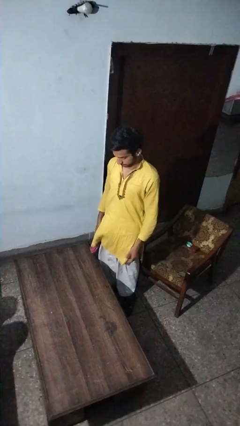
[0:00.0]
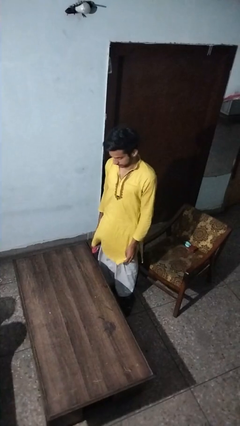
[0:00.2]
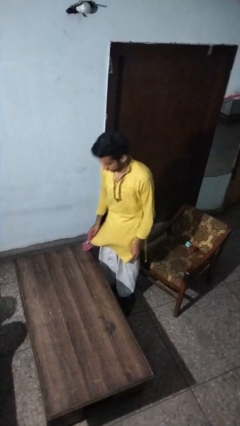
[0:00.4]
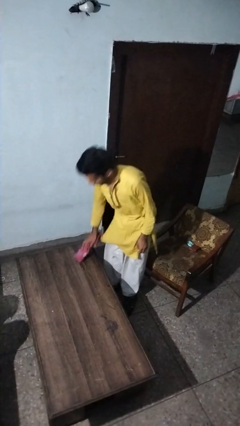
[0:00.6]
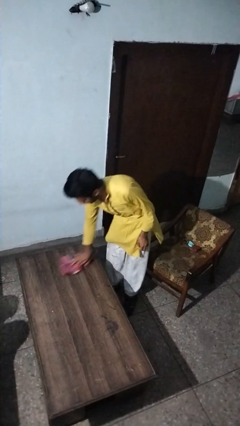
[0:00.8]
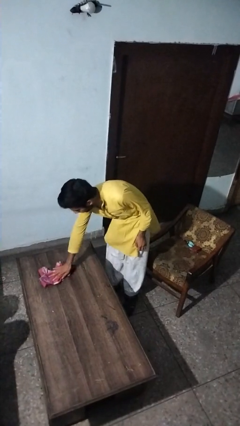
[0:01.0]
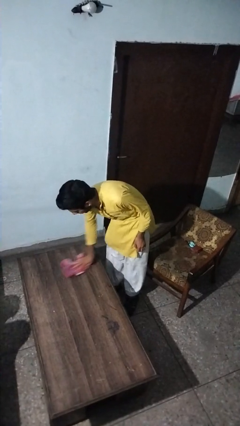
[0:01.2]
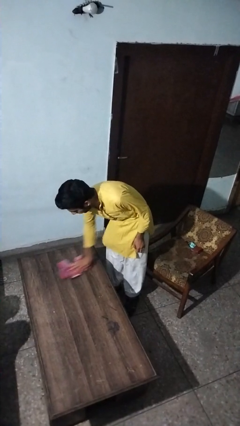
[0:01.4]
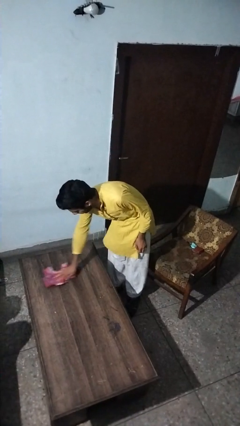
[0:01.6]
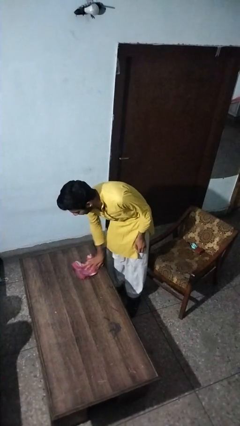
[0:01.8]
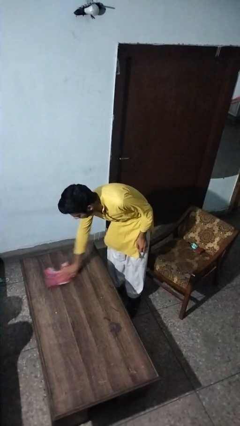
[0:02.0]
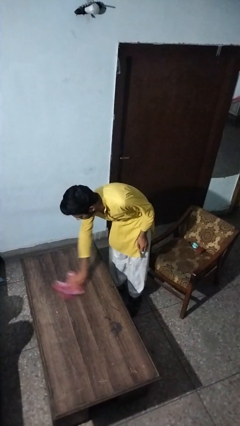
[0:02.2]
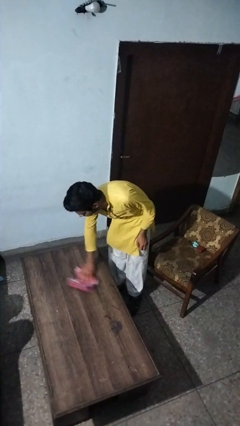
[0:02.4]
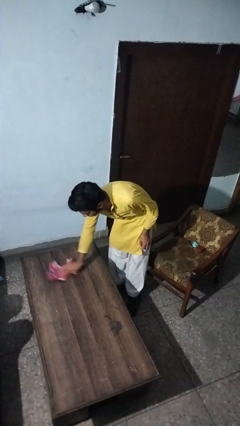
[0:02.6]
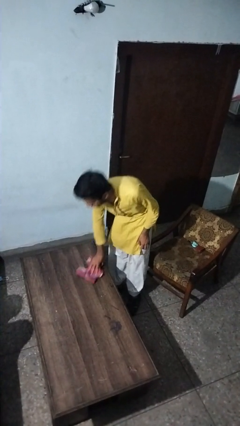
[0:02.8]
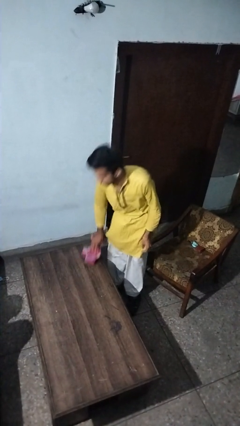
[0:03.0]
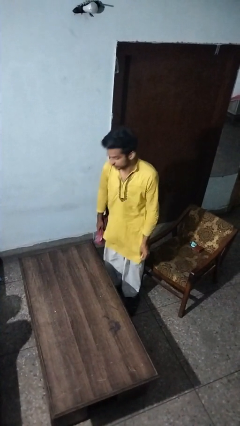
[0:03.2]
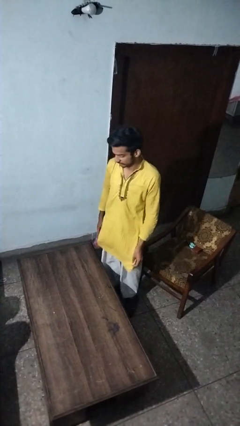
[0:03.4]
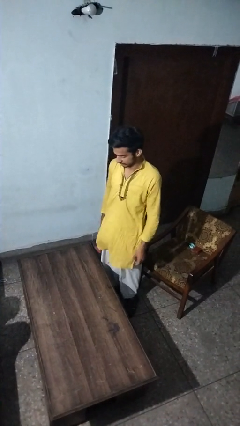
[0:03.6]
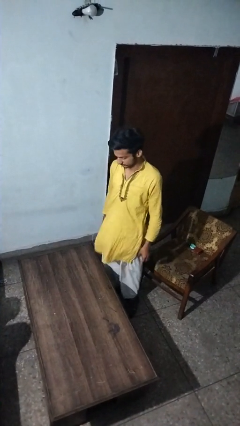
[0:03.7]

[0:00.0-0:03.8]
person cleans table with rag

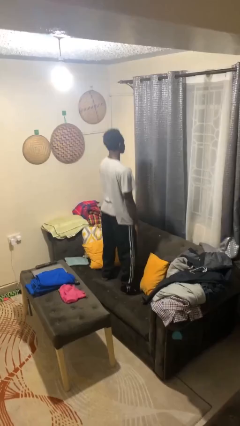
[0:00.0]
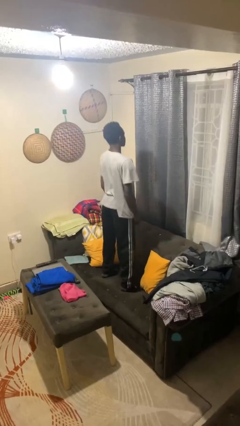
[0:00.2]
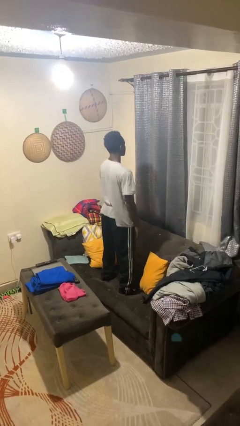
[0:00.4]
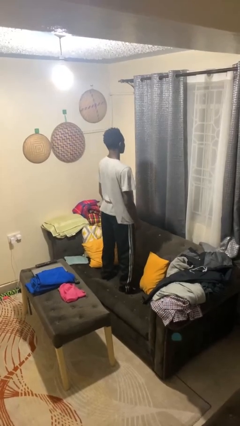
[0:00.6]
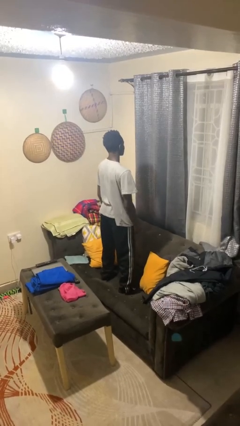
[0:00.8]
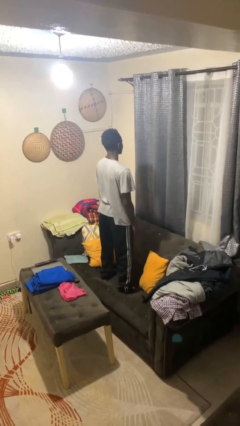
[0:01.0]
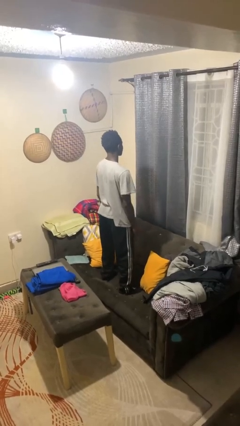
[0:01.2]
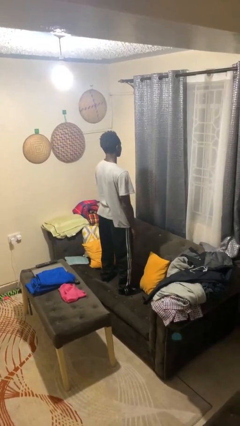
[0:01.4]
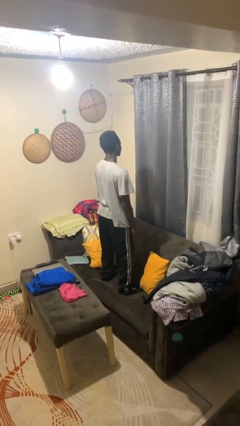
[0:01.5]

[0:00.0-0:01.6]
person jumps on couch

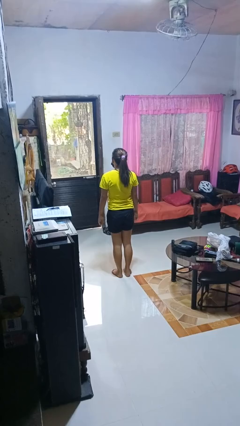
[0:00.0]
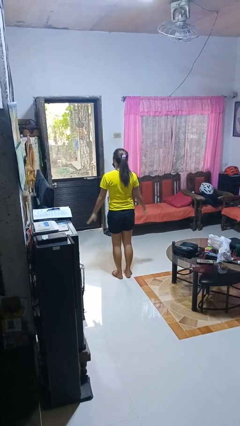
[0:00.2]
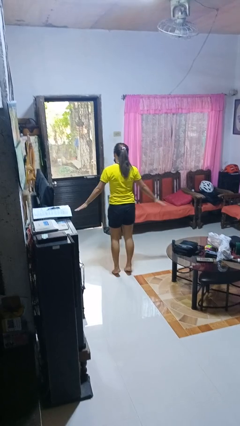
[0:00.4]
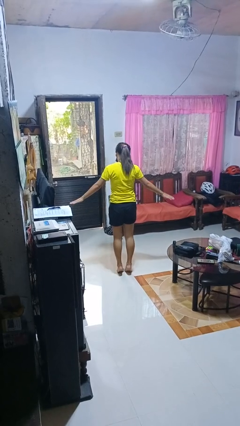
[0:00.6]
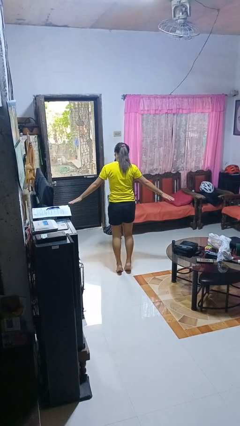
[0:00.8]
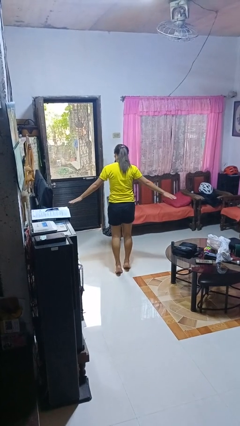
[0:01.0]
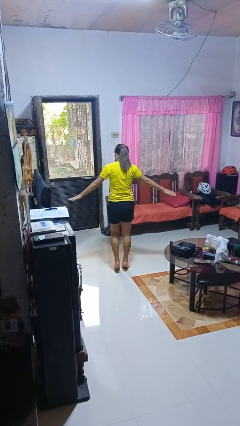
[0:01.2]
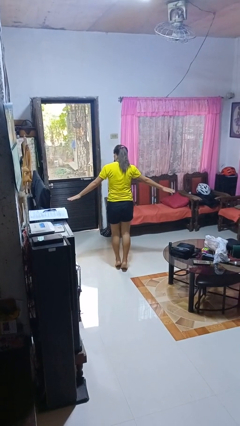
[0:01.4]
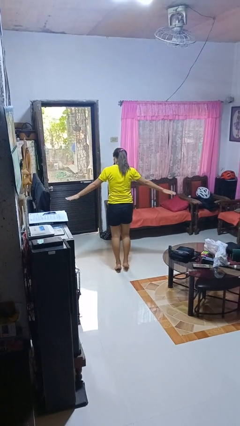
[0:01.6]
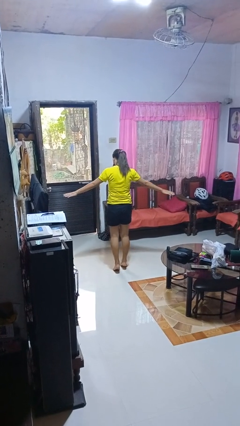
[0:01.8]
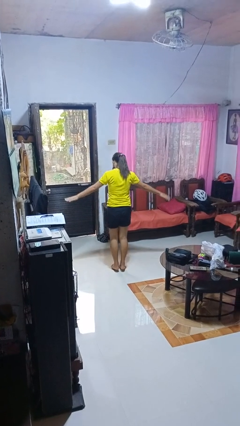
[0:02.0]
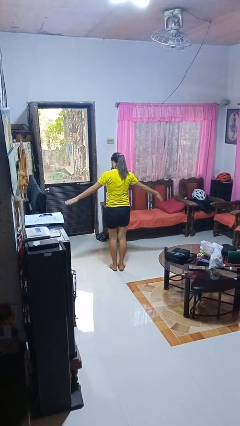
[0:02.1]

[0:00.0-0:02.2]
person walks tiptoe

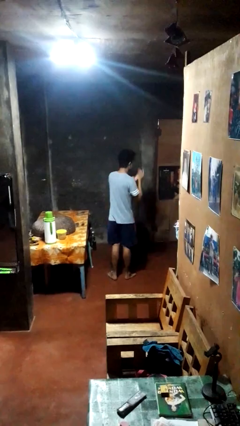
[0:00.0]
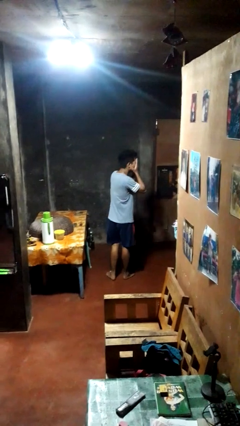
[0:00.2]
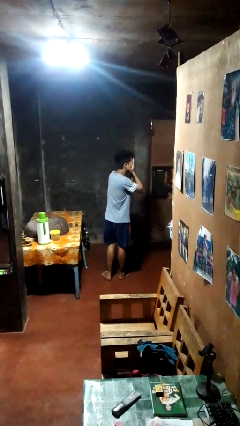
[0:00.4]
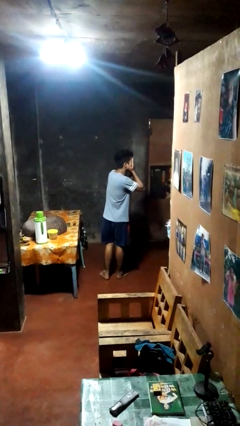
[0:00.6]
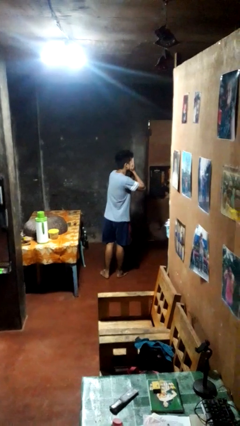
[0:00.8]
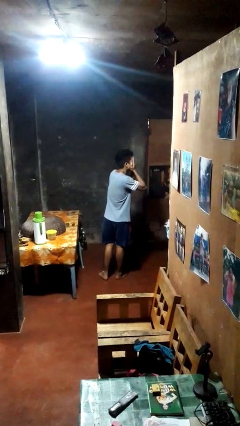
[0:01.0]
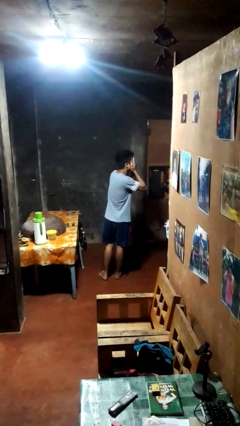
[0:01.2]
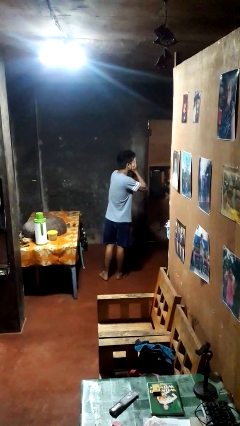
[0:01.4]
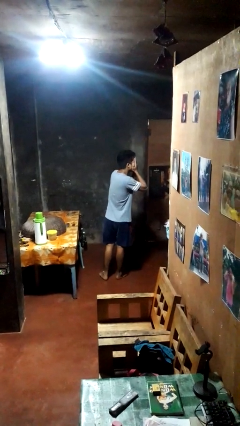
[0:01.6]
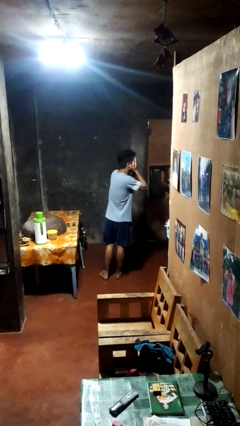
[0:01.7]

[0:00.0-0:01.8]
person covers face with hands

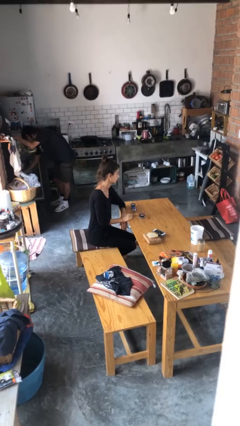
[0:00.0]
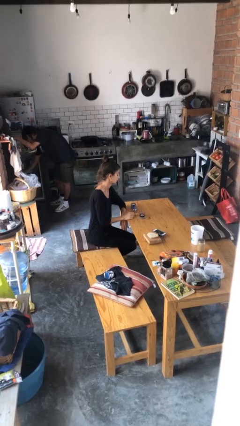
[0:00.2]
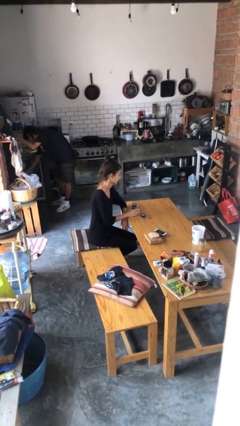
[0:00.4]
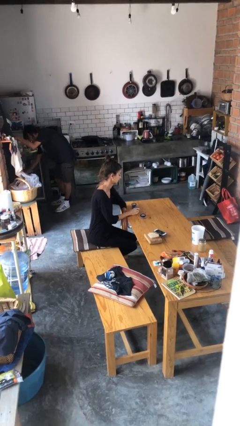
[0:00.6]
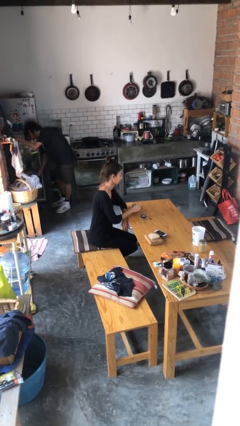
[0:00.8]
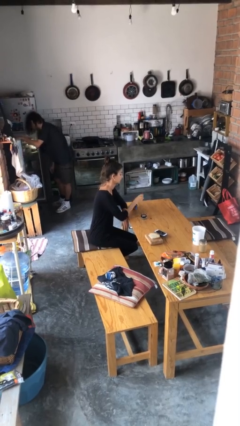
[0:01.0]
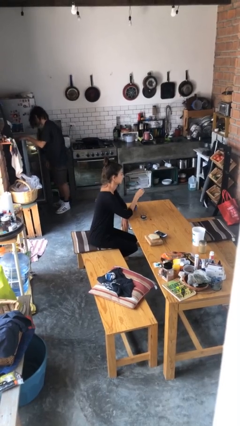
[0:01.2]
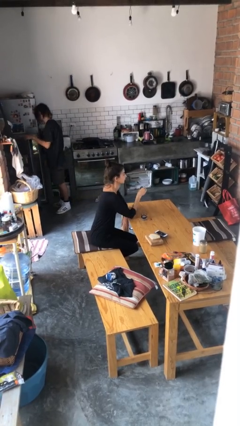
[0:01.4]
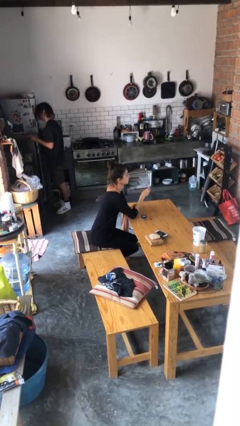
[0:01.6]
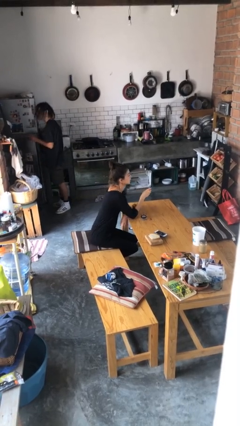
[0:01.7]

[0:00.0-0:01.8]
person picks up object from table

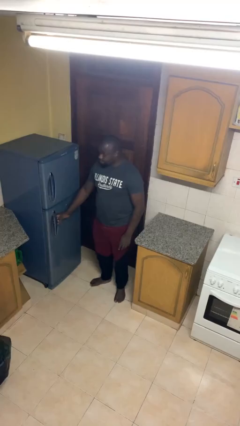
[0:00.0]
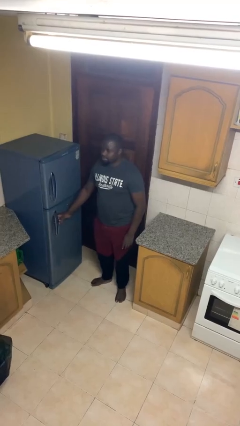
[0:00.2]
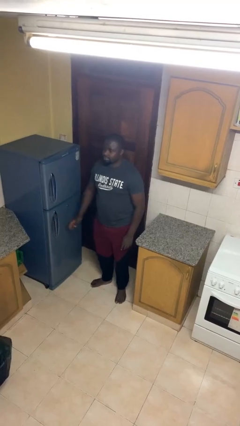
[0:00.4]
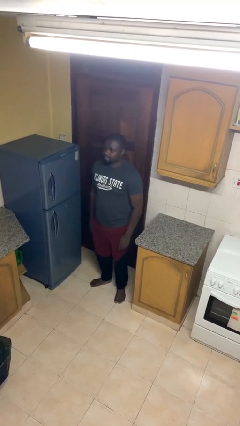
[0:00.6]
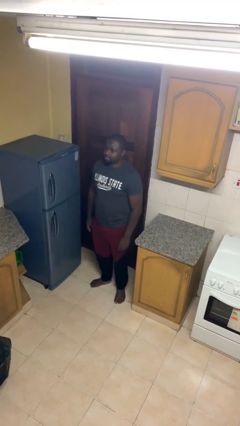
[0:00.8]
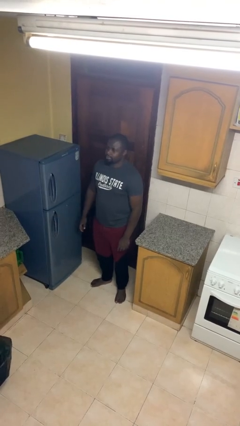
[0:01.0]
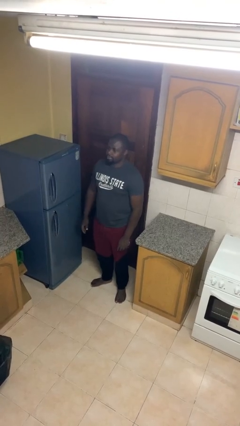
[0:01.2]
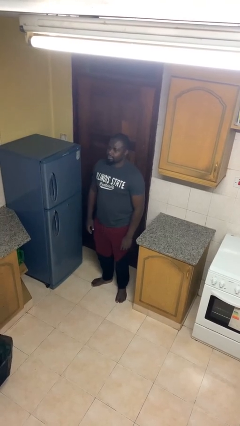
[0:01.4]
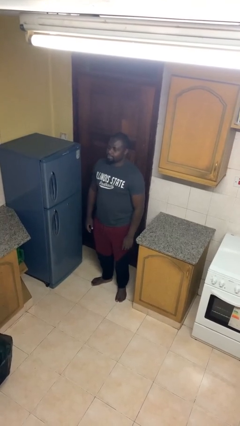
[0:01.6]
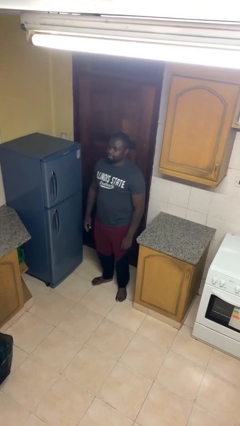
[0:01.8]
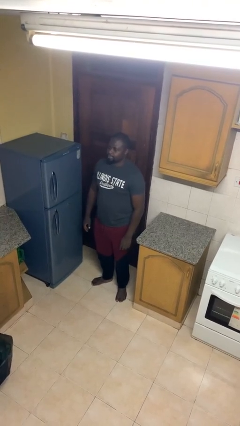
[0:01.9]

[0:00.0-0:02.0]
person closes refrigerator

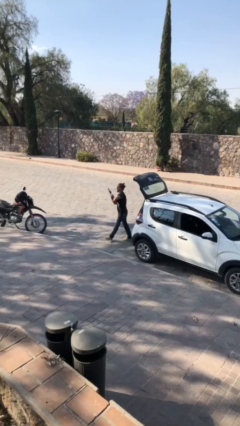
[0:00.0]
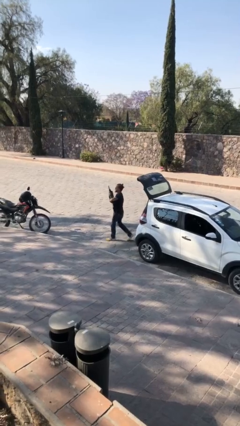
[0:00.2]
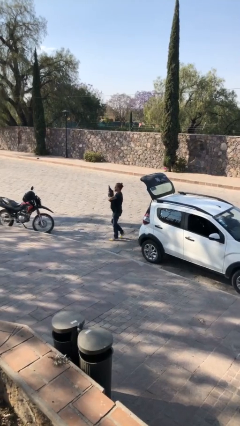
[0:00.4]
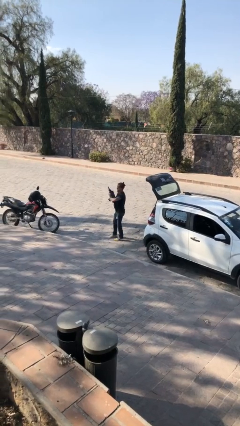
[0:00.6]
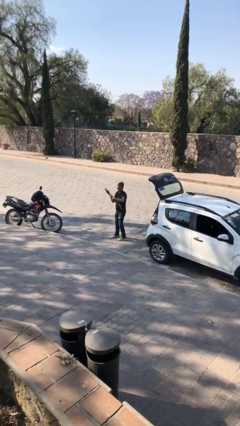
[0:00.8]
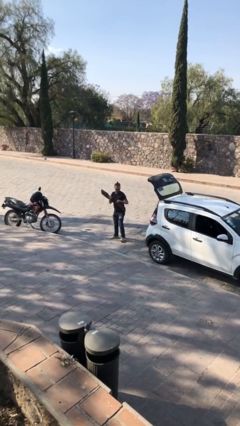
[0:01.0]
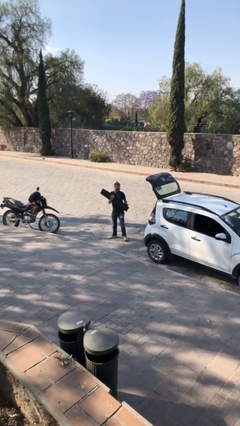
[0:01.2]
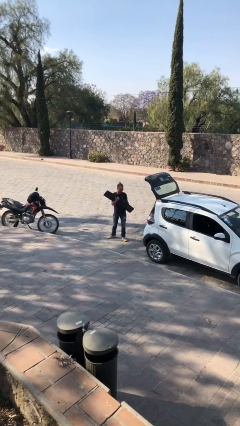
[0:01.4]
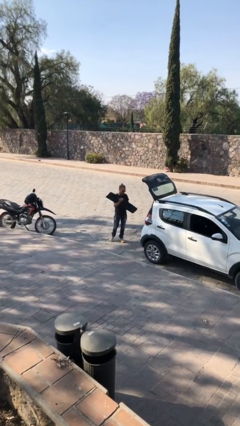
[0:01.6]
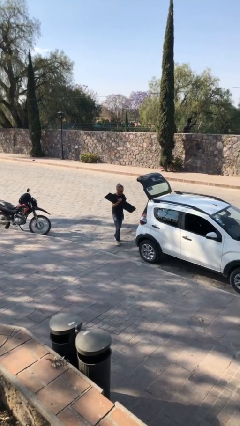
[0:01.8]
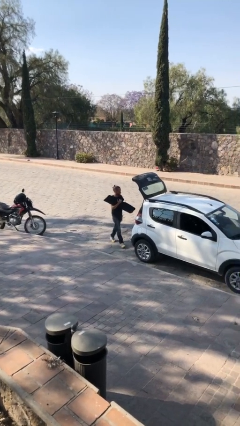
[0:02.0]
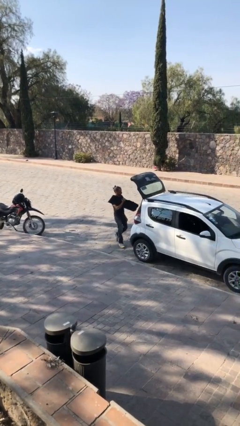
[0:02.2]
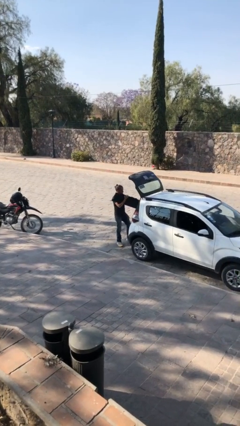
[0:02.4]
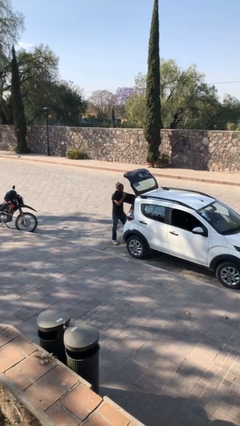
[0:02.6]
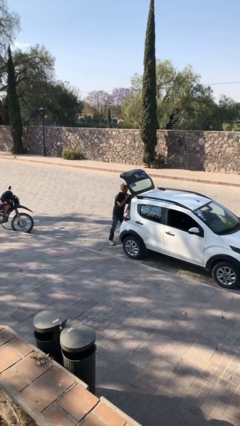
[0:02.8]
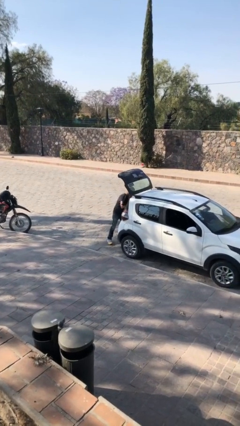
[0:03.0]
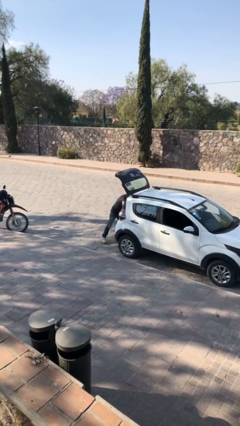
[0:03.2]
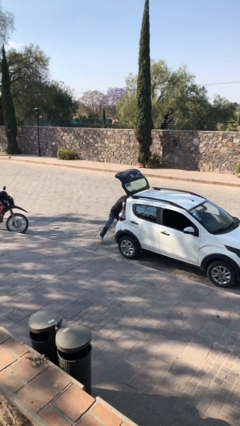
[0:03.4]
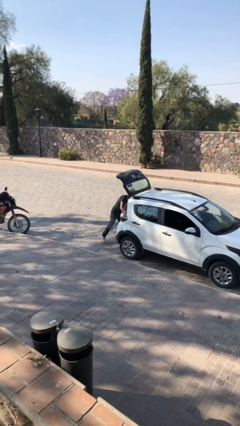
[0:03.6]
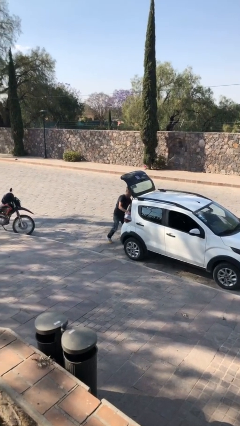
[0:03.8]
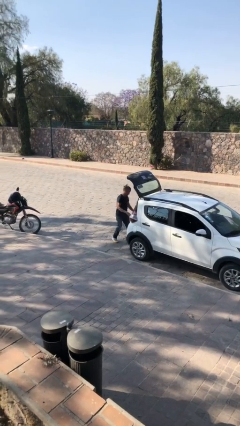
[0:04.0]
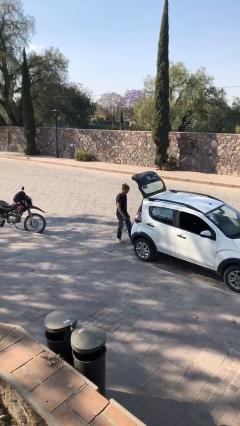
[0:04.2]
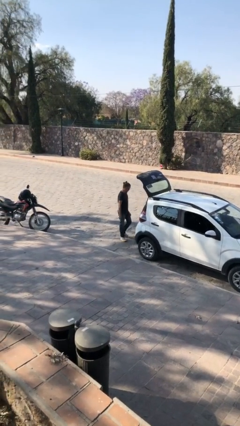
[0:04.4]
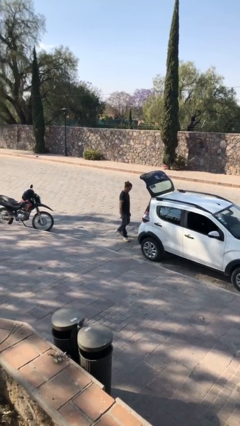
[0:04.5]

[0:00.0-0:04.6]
person loads car
